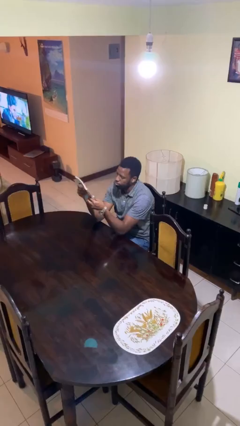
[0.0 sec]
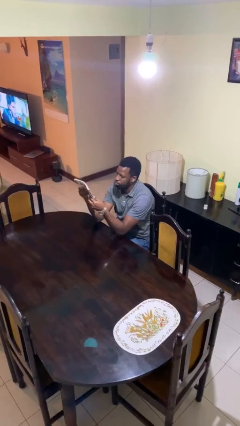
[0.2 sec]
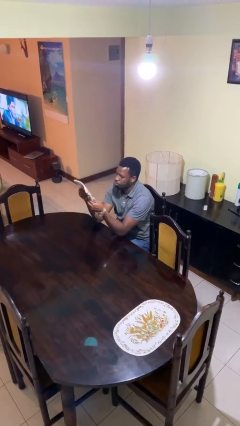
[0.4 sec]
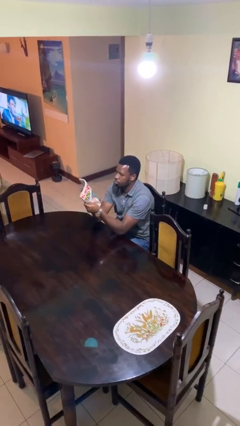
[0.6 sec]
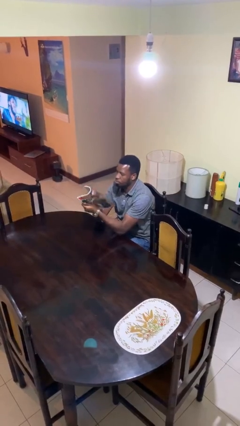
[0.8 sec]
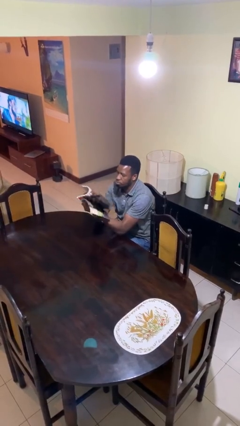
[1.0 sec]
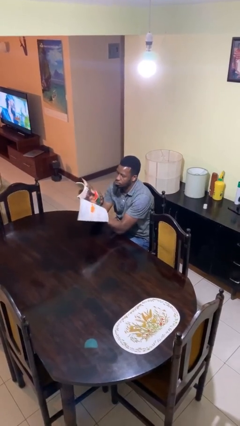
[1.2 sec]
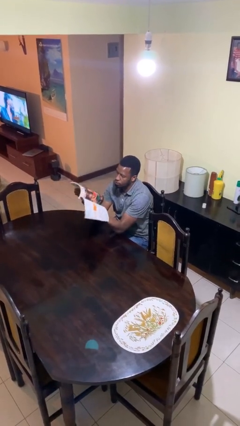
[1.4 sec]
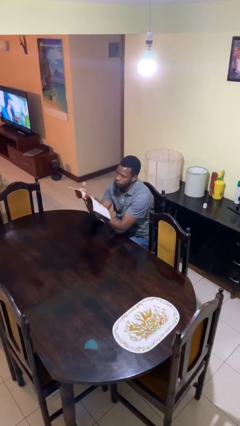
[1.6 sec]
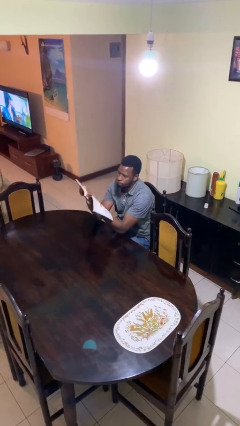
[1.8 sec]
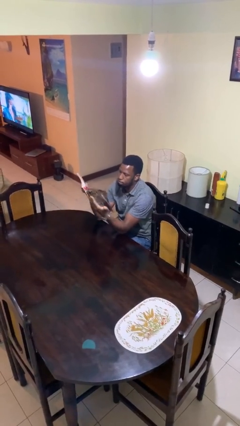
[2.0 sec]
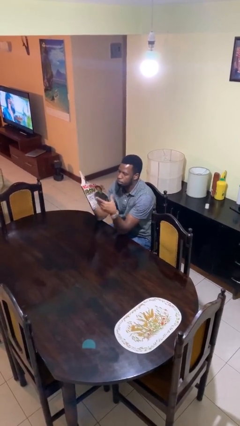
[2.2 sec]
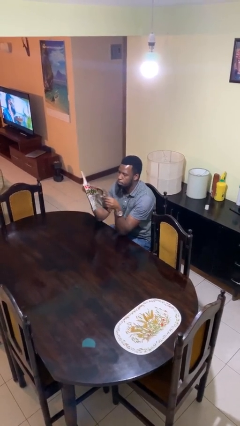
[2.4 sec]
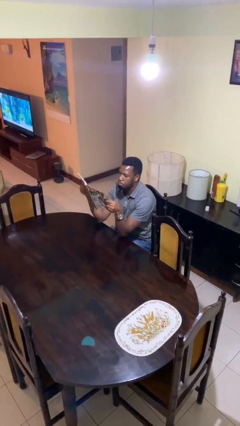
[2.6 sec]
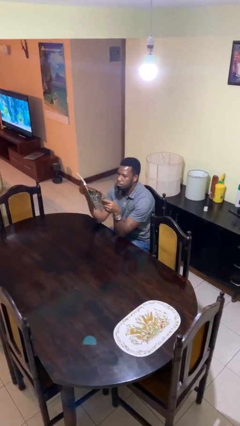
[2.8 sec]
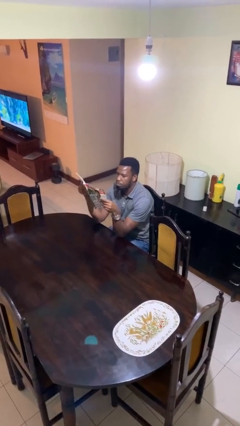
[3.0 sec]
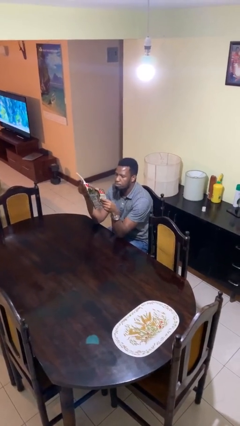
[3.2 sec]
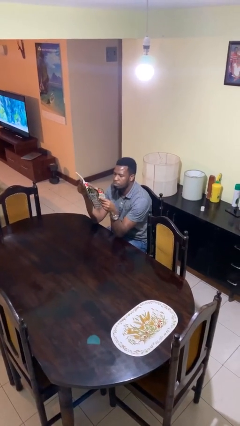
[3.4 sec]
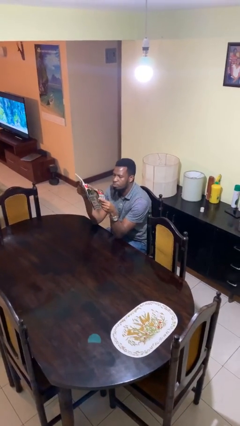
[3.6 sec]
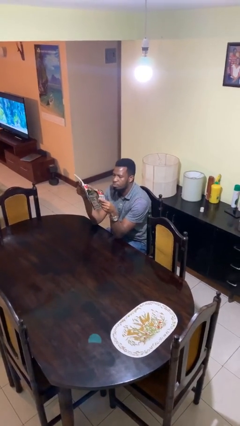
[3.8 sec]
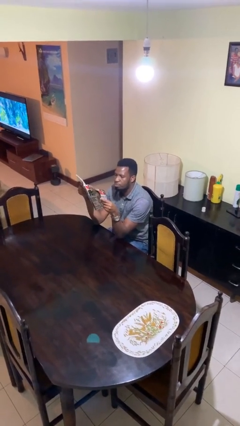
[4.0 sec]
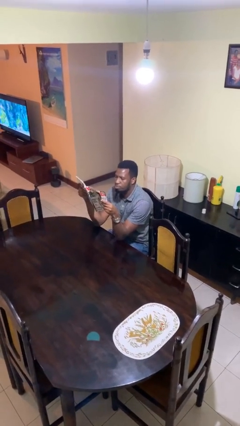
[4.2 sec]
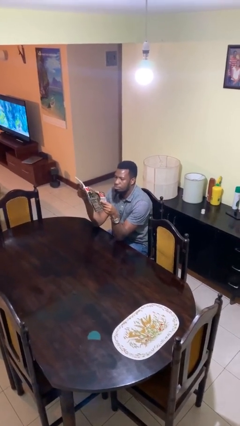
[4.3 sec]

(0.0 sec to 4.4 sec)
person reads document

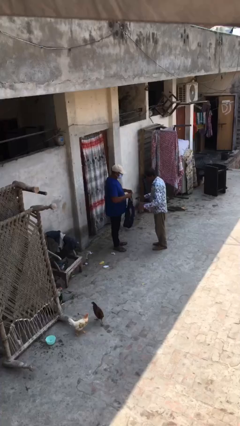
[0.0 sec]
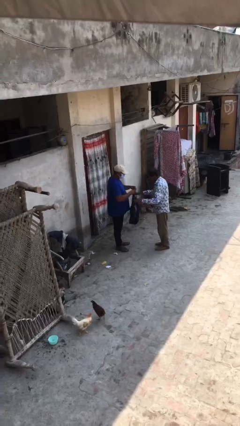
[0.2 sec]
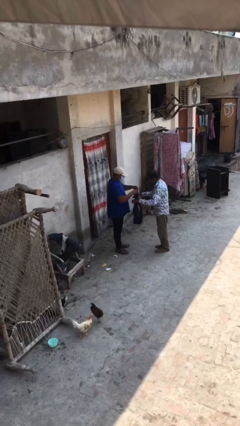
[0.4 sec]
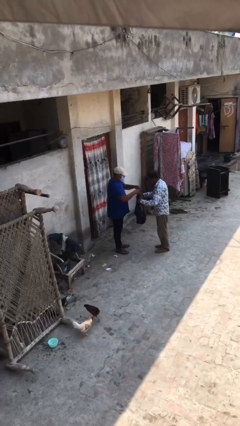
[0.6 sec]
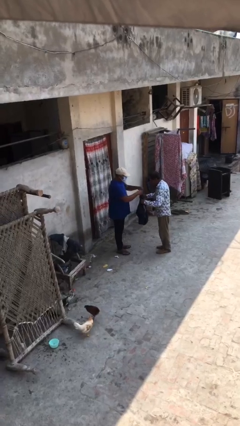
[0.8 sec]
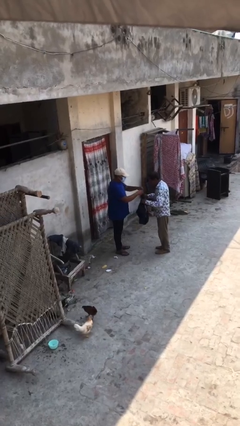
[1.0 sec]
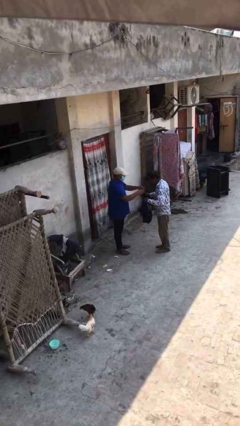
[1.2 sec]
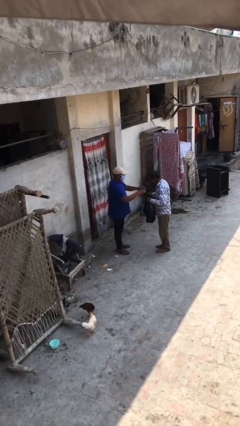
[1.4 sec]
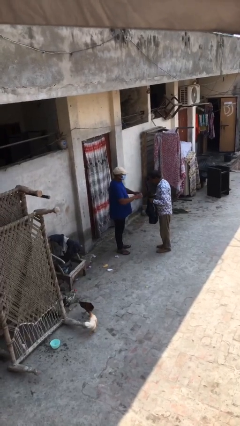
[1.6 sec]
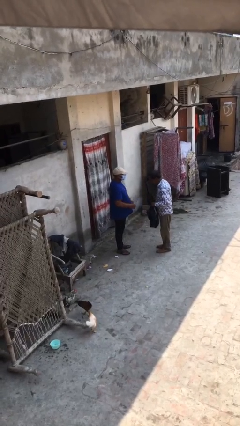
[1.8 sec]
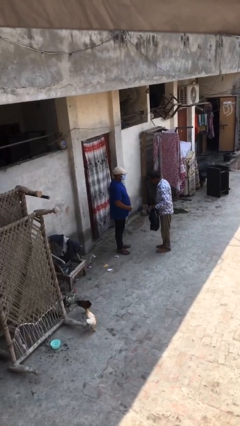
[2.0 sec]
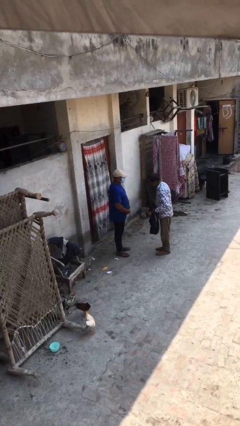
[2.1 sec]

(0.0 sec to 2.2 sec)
person transfers object to person

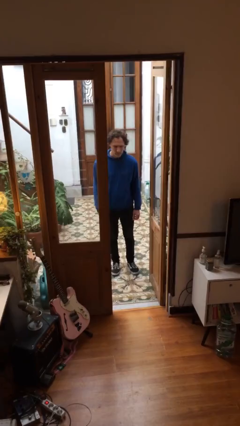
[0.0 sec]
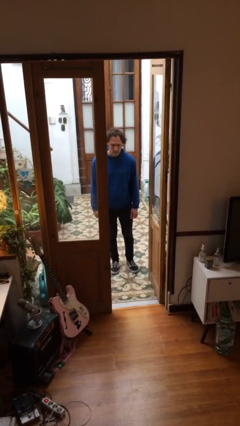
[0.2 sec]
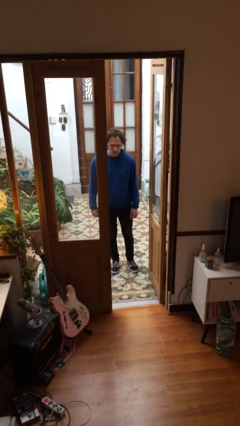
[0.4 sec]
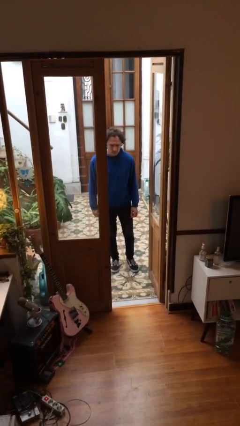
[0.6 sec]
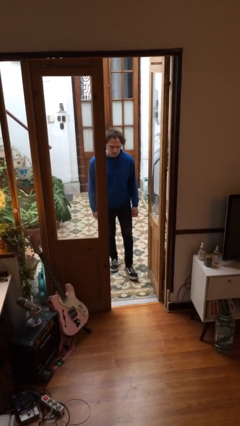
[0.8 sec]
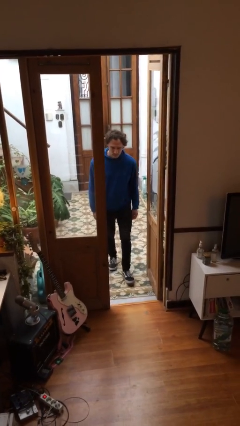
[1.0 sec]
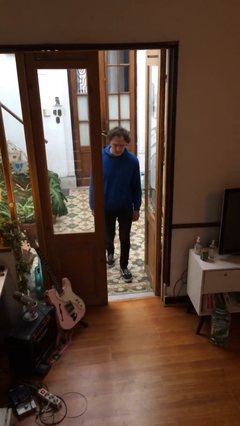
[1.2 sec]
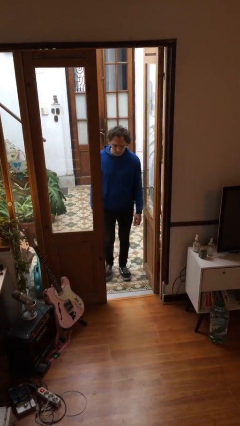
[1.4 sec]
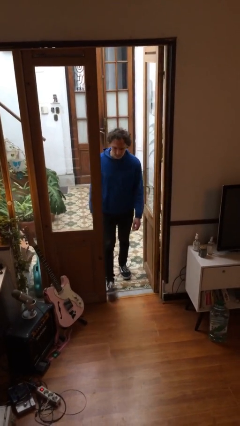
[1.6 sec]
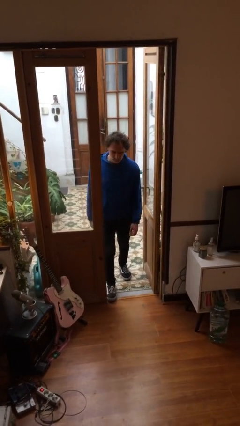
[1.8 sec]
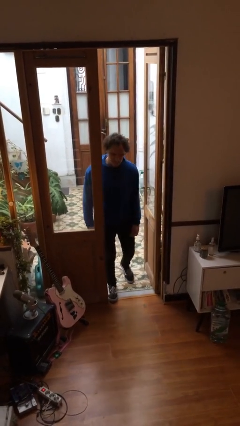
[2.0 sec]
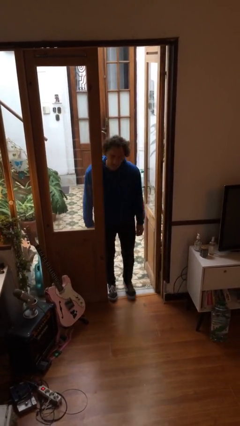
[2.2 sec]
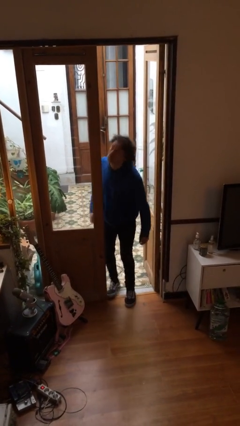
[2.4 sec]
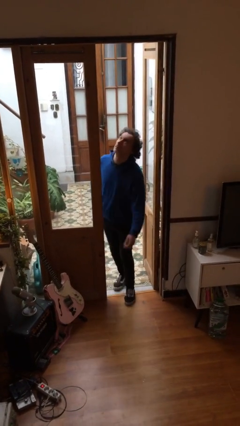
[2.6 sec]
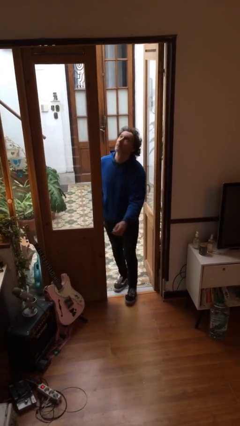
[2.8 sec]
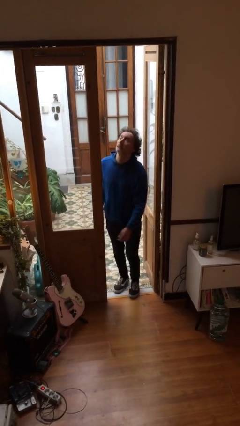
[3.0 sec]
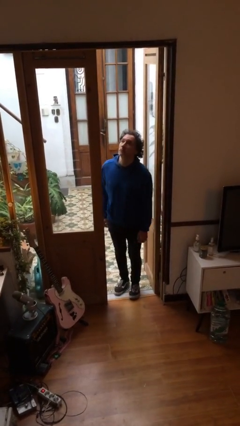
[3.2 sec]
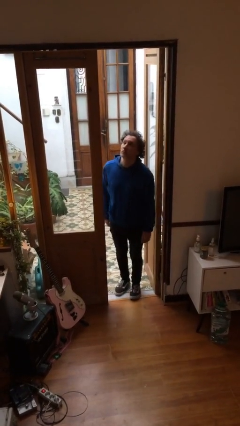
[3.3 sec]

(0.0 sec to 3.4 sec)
person bumps into wall

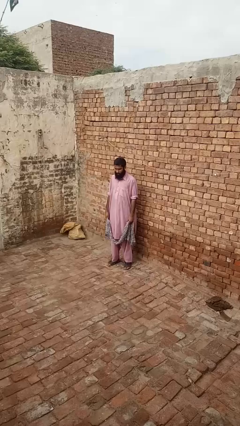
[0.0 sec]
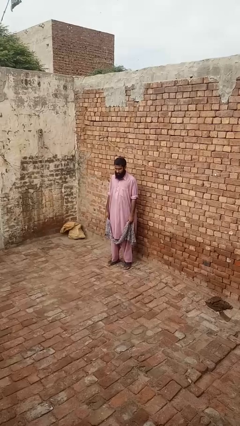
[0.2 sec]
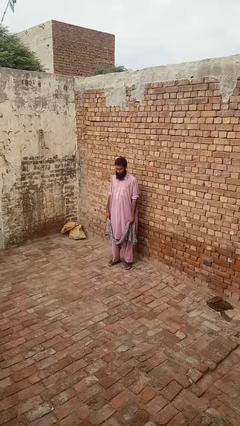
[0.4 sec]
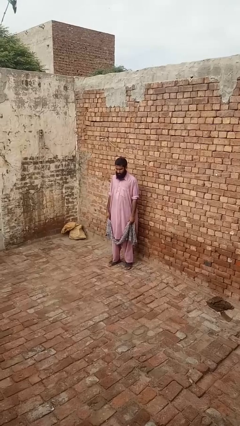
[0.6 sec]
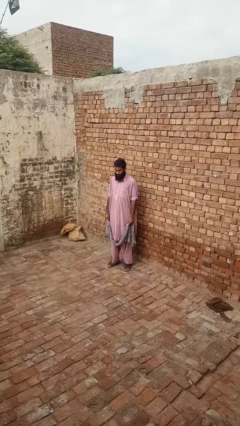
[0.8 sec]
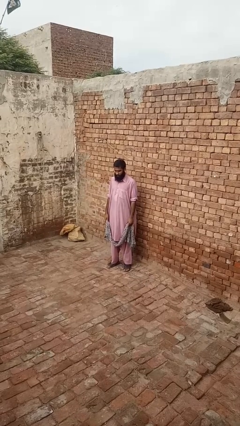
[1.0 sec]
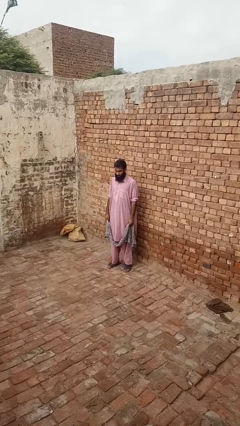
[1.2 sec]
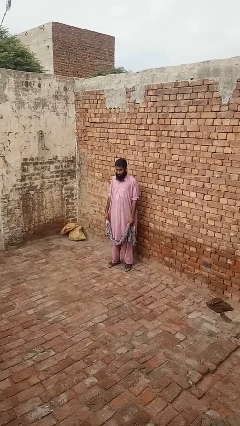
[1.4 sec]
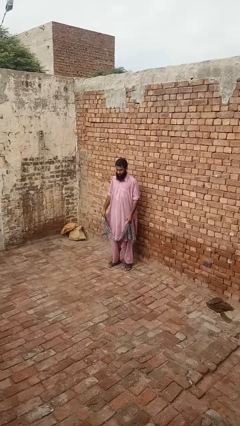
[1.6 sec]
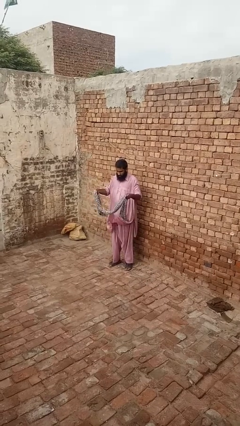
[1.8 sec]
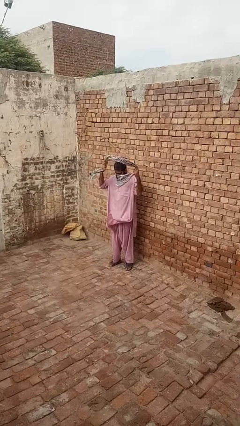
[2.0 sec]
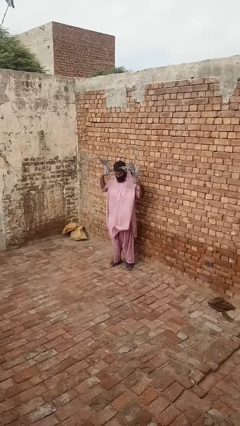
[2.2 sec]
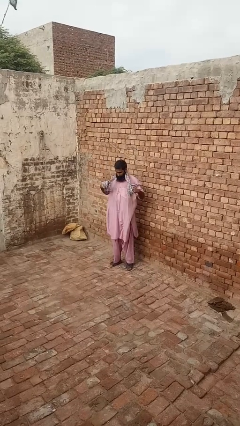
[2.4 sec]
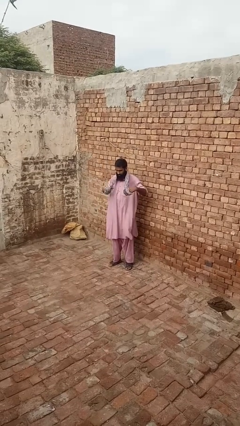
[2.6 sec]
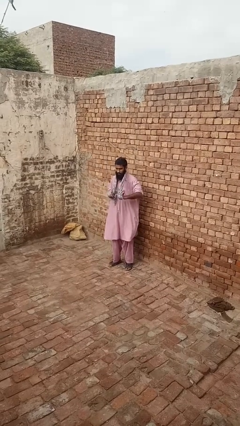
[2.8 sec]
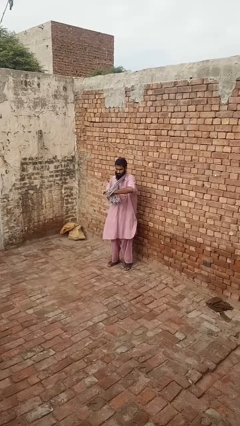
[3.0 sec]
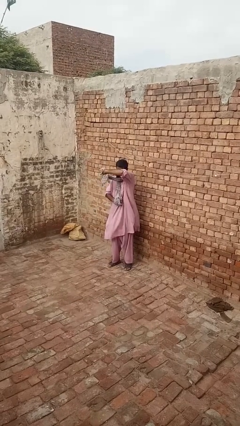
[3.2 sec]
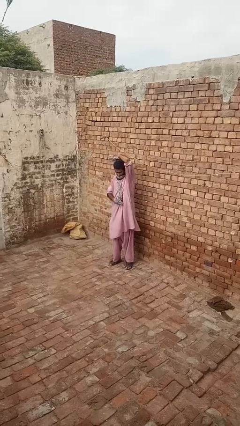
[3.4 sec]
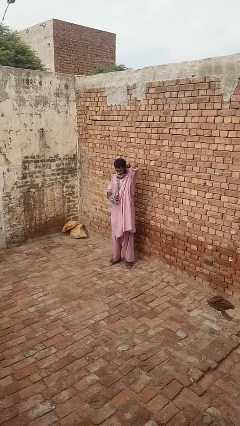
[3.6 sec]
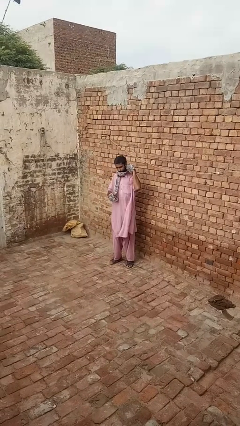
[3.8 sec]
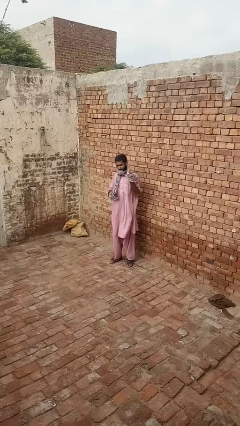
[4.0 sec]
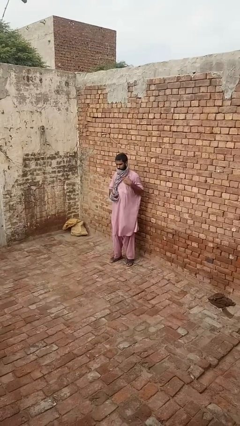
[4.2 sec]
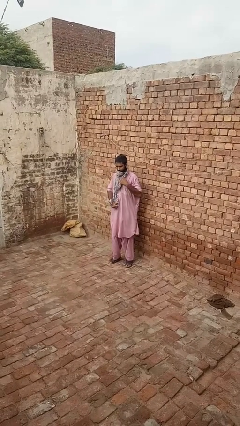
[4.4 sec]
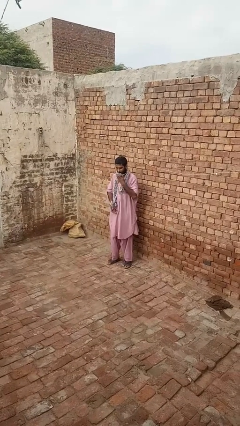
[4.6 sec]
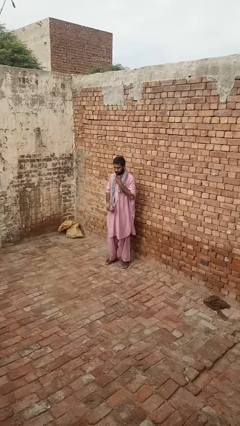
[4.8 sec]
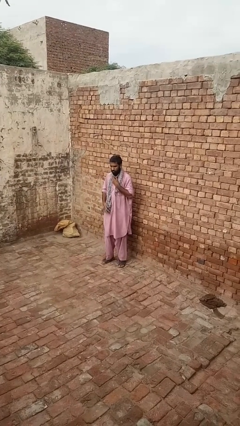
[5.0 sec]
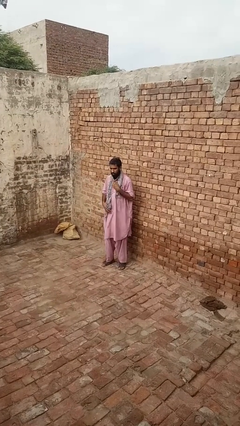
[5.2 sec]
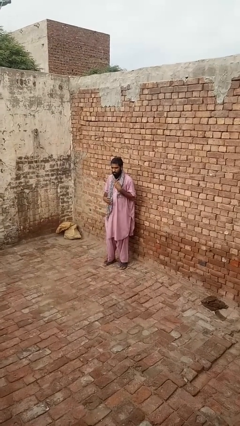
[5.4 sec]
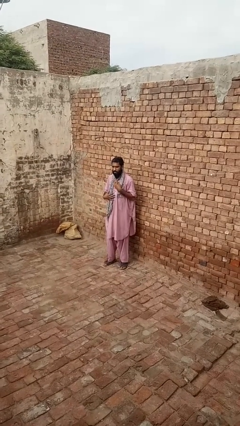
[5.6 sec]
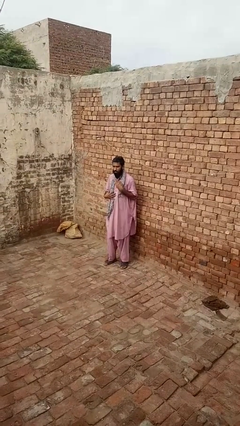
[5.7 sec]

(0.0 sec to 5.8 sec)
person puts on scarf

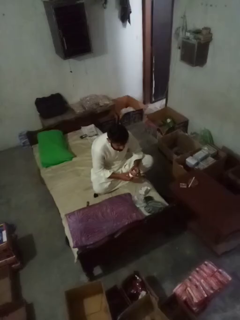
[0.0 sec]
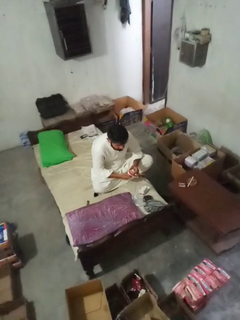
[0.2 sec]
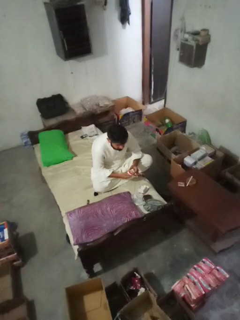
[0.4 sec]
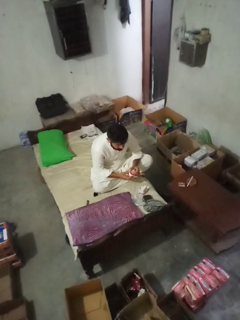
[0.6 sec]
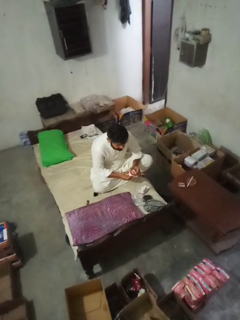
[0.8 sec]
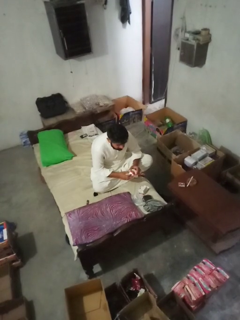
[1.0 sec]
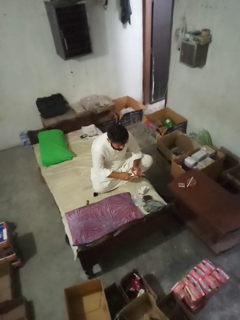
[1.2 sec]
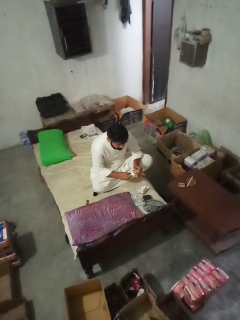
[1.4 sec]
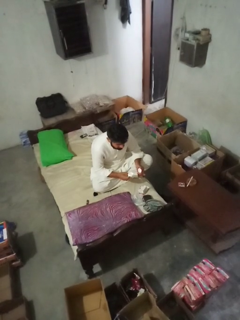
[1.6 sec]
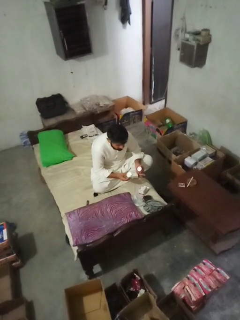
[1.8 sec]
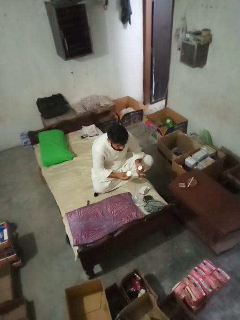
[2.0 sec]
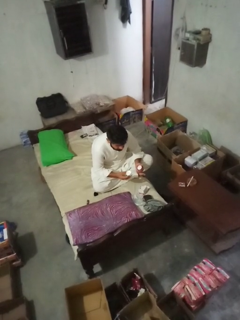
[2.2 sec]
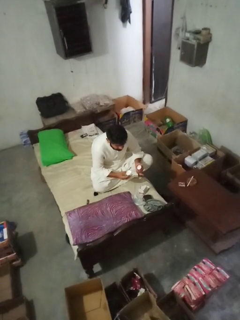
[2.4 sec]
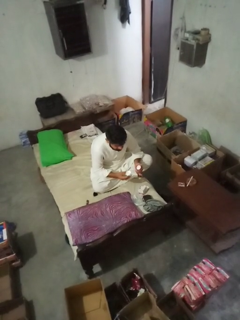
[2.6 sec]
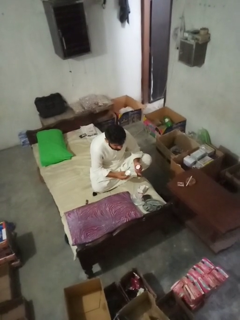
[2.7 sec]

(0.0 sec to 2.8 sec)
person opens jar
